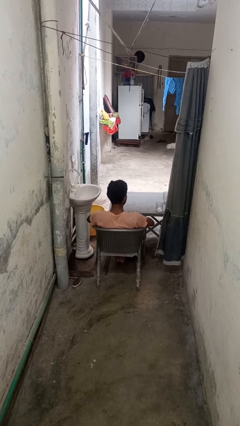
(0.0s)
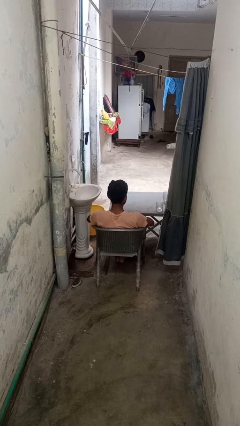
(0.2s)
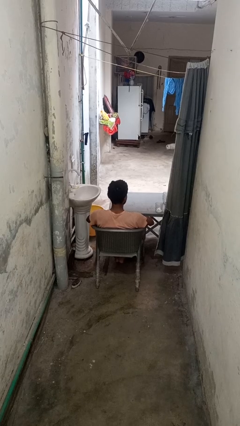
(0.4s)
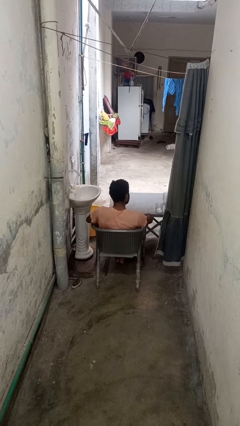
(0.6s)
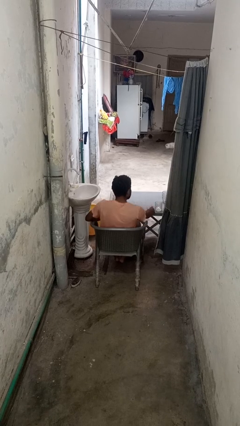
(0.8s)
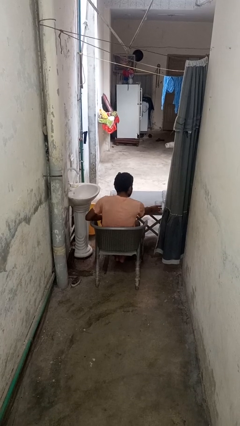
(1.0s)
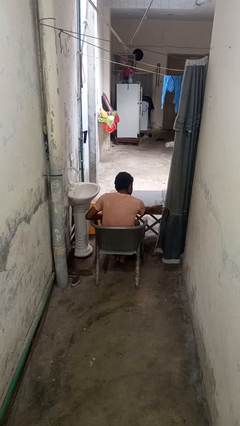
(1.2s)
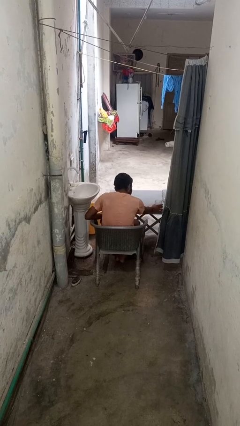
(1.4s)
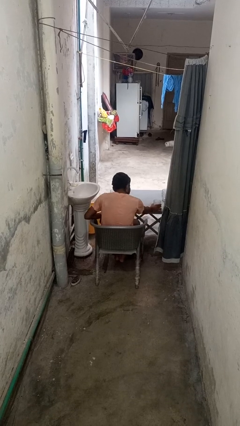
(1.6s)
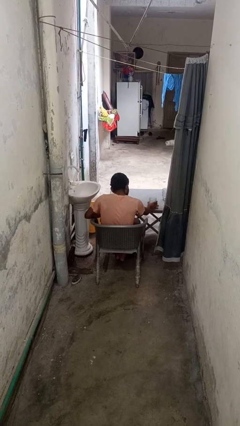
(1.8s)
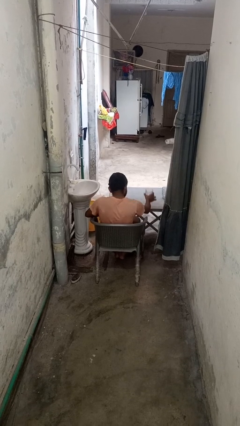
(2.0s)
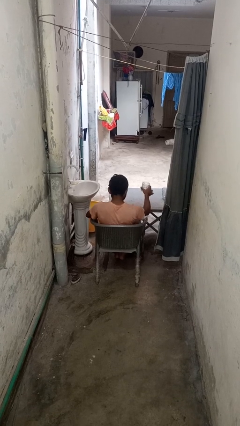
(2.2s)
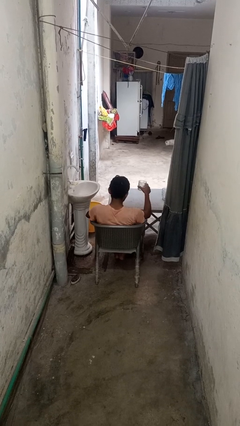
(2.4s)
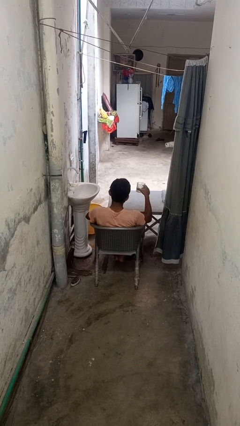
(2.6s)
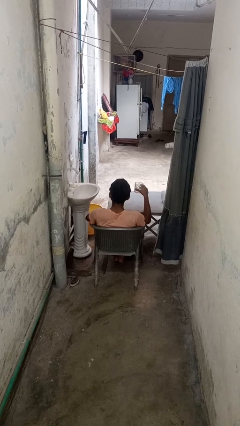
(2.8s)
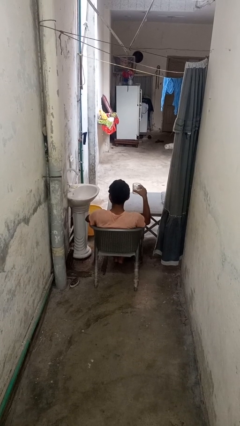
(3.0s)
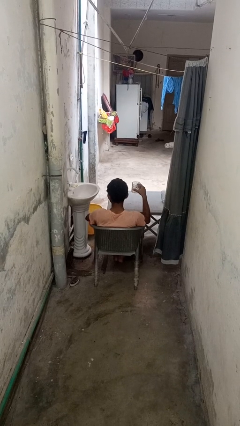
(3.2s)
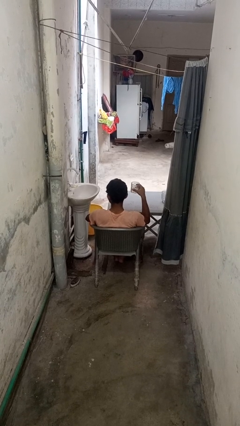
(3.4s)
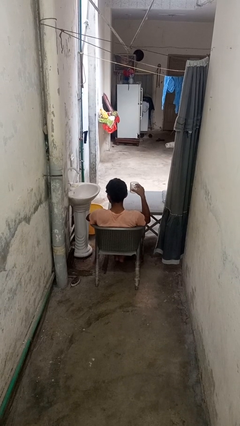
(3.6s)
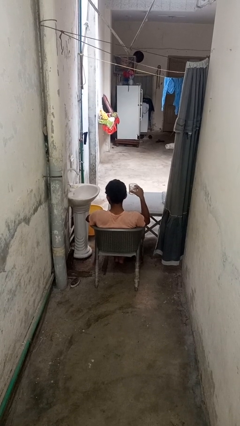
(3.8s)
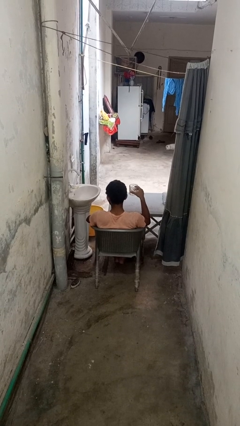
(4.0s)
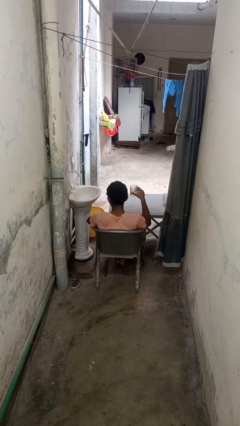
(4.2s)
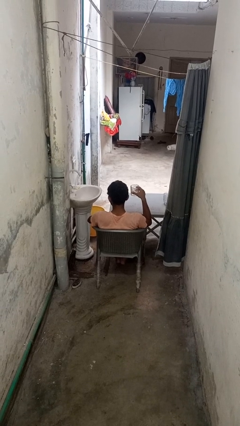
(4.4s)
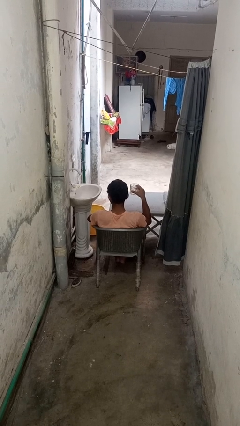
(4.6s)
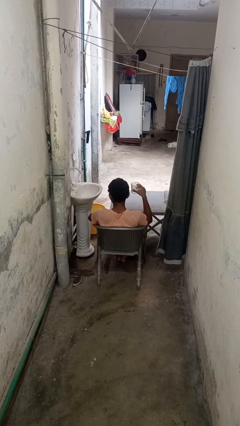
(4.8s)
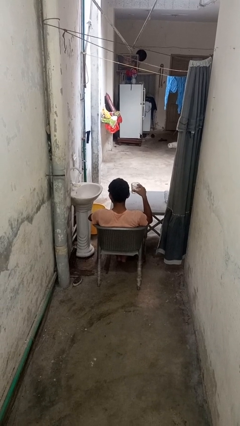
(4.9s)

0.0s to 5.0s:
person picks up object from table

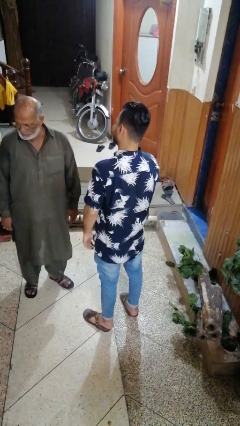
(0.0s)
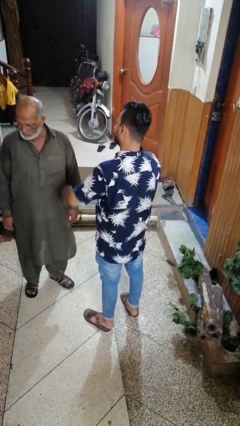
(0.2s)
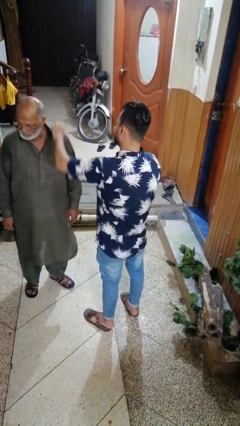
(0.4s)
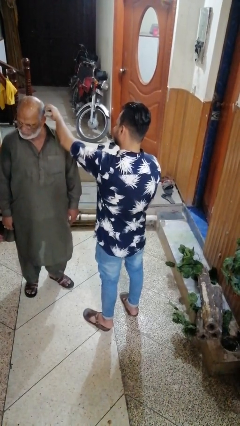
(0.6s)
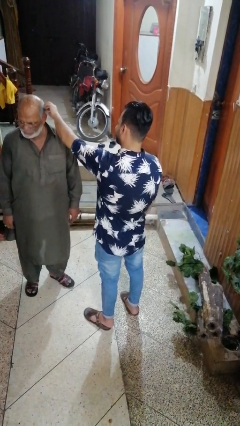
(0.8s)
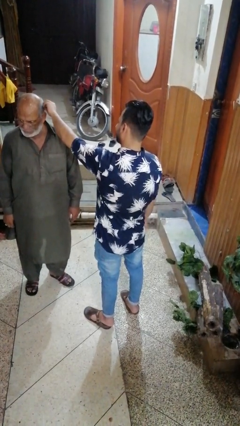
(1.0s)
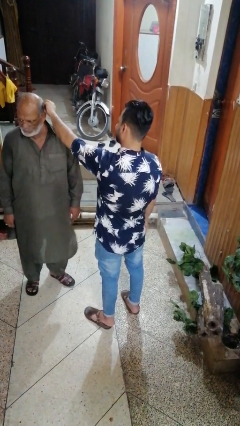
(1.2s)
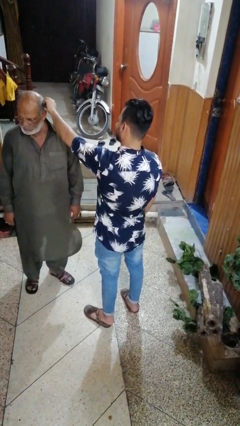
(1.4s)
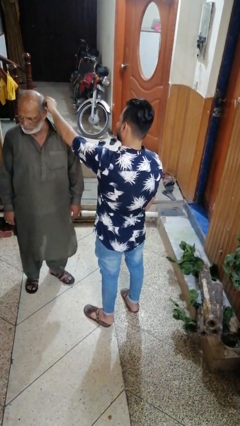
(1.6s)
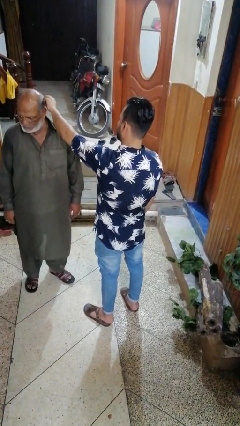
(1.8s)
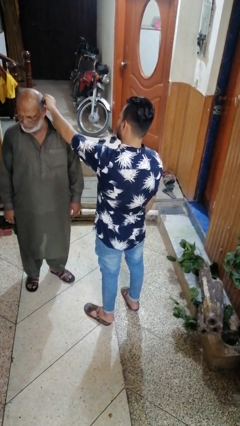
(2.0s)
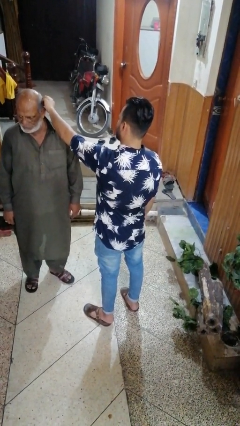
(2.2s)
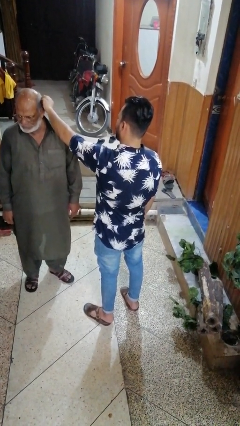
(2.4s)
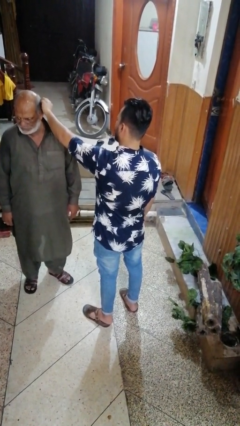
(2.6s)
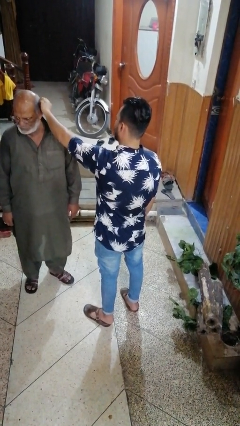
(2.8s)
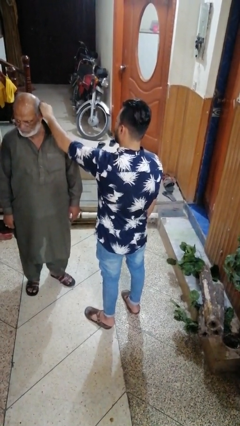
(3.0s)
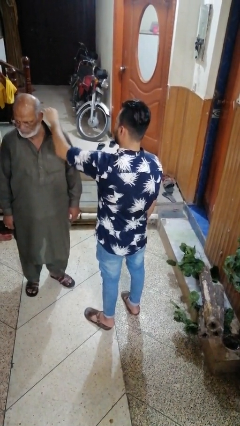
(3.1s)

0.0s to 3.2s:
person grabs person by hair

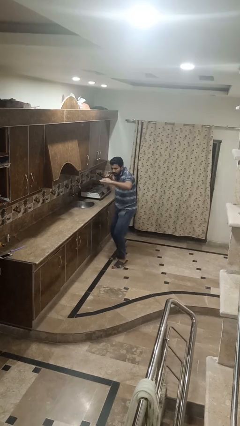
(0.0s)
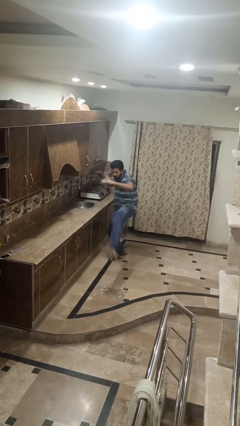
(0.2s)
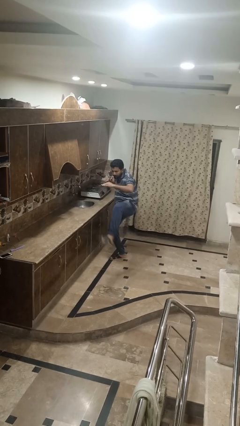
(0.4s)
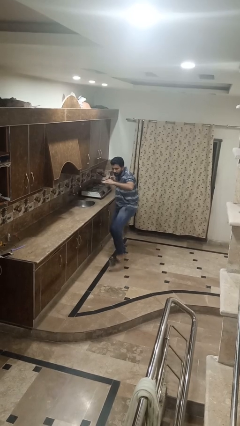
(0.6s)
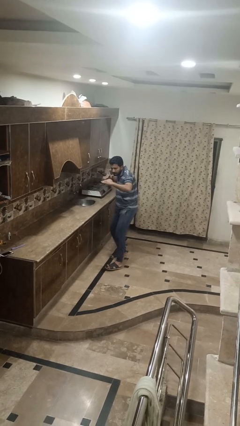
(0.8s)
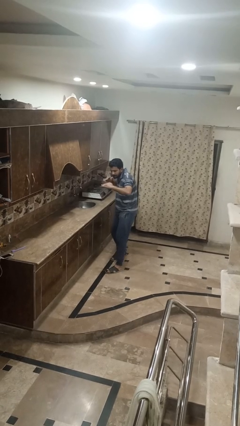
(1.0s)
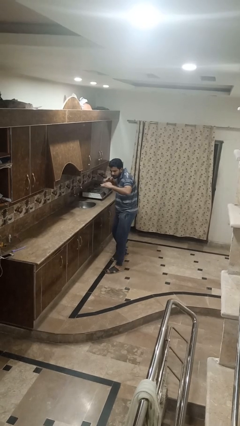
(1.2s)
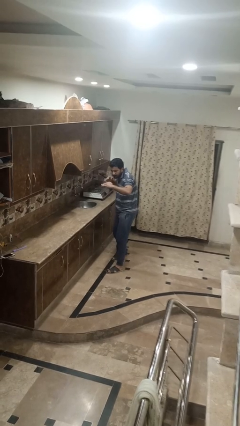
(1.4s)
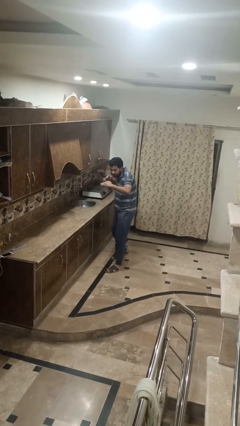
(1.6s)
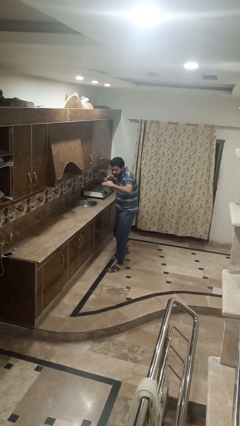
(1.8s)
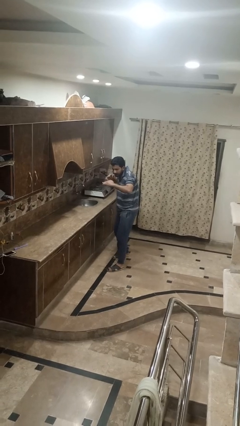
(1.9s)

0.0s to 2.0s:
person karate kicks

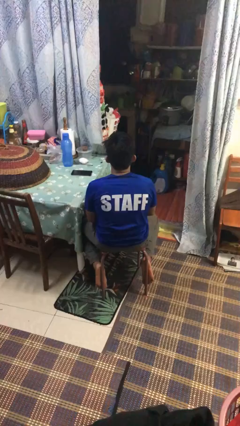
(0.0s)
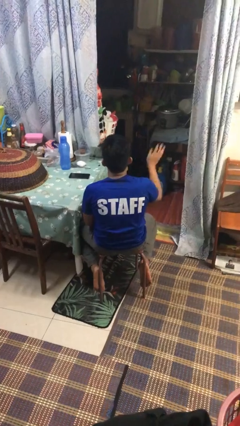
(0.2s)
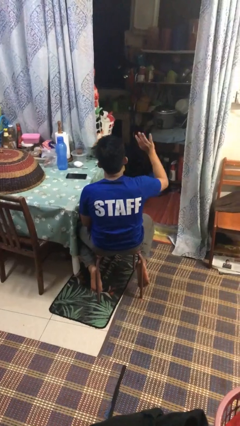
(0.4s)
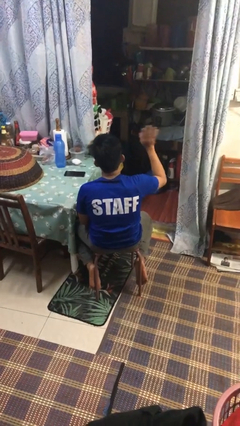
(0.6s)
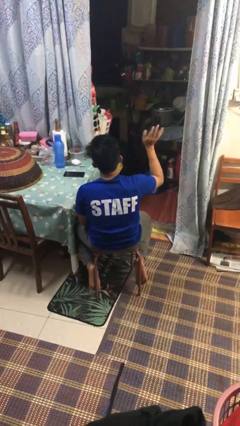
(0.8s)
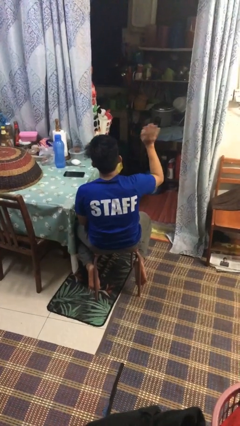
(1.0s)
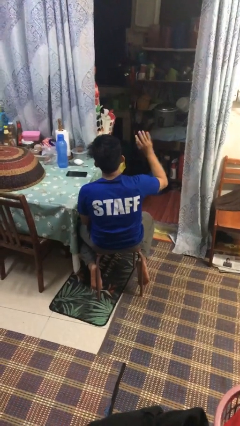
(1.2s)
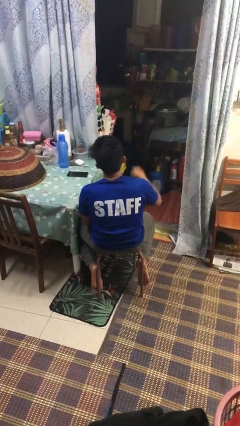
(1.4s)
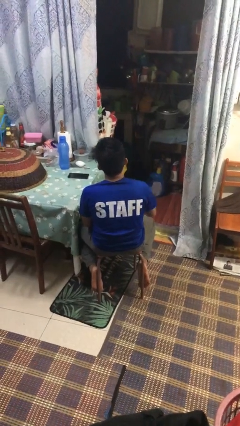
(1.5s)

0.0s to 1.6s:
person waves at person

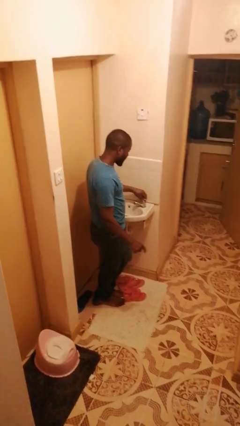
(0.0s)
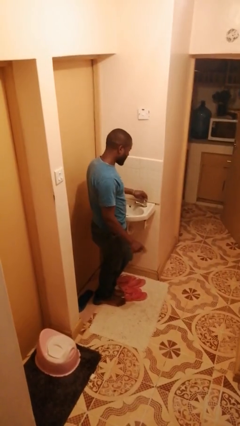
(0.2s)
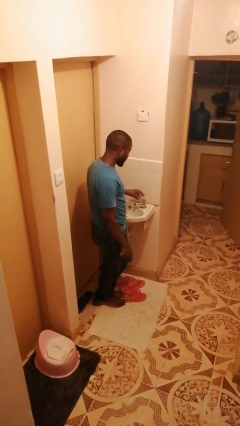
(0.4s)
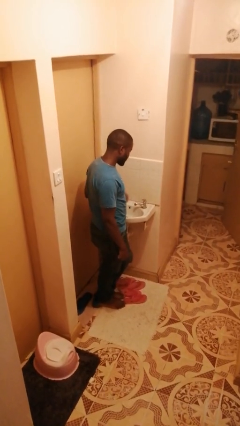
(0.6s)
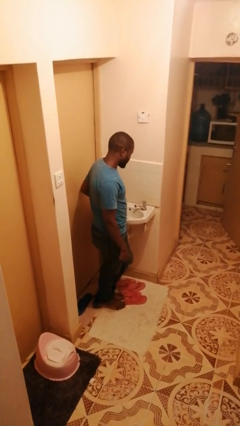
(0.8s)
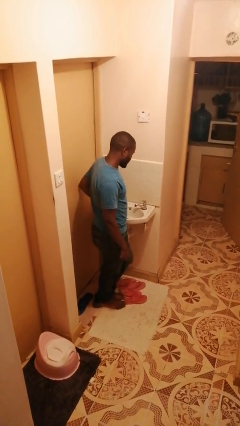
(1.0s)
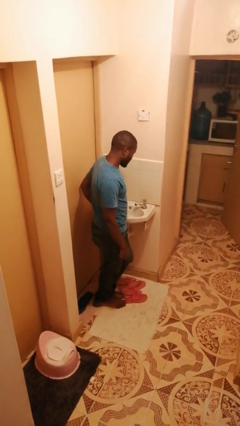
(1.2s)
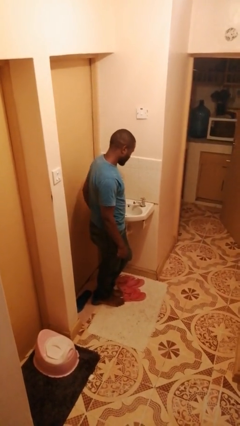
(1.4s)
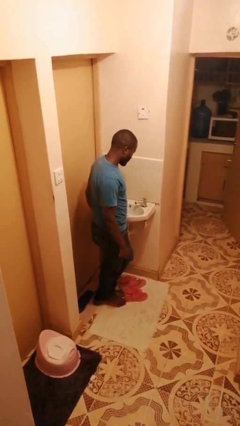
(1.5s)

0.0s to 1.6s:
person turns off faucet

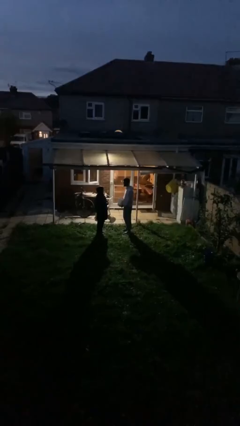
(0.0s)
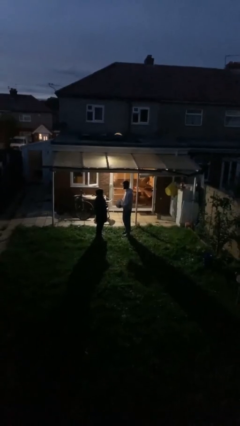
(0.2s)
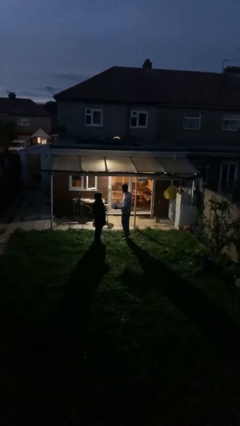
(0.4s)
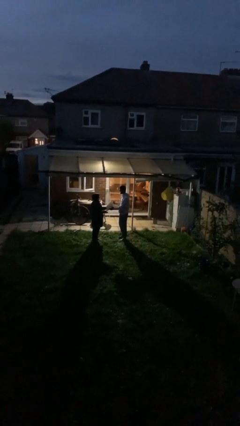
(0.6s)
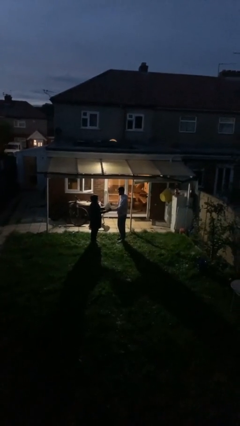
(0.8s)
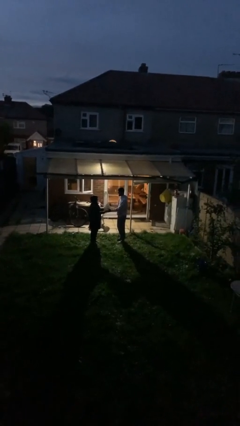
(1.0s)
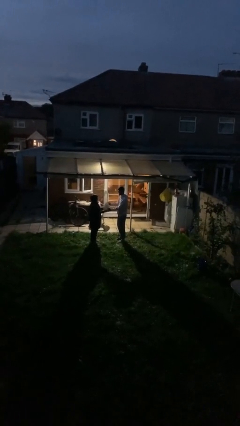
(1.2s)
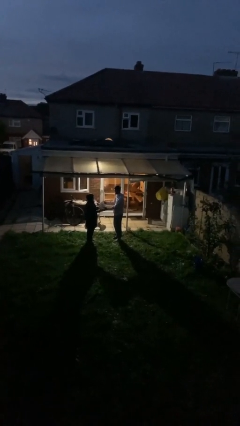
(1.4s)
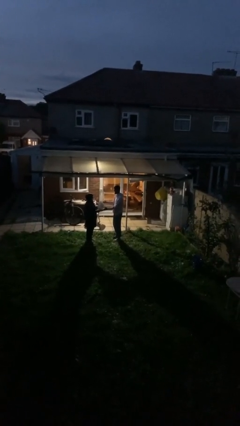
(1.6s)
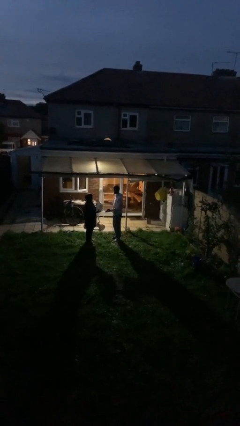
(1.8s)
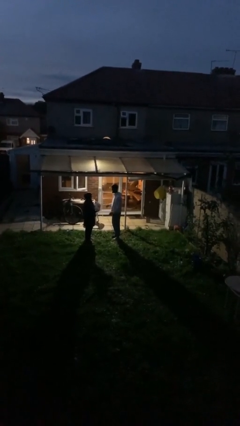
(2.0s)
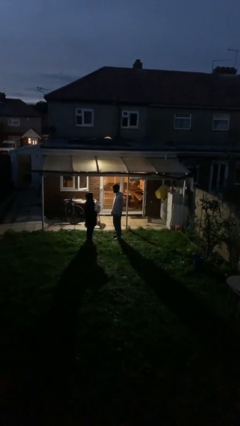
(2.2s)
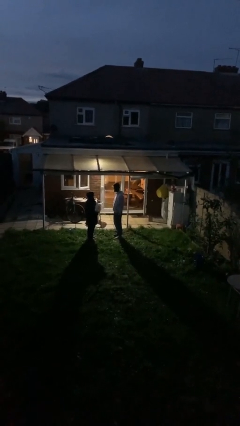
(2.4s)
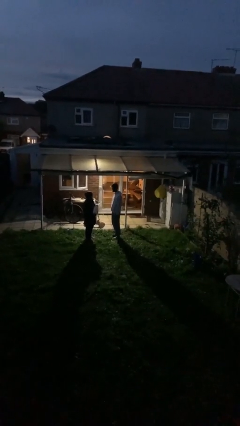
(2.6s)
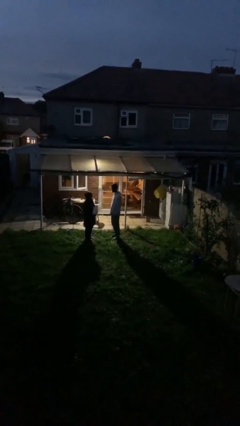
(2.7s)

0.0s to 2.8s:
person transfers object to person

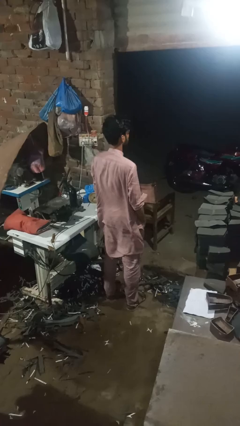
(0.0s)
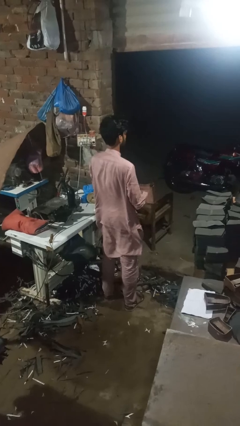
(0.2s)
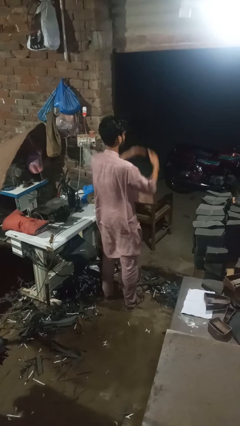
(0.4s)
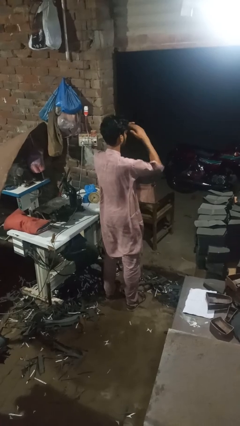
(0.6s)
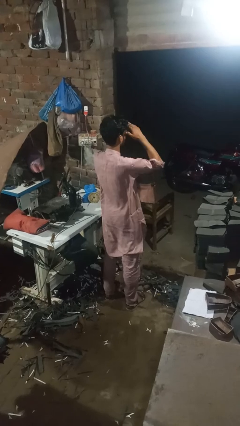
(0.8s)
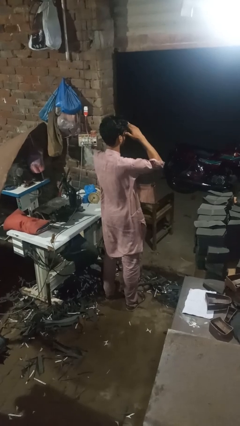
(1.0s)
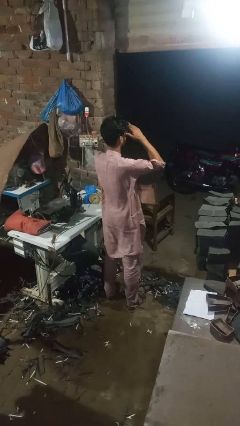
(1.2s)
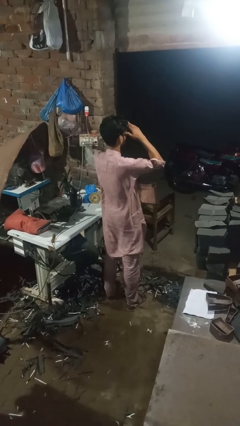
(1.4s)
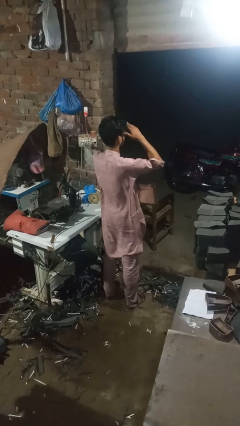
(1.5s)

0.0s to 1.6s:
person shades eyes
